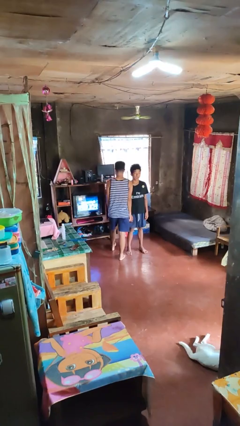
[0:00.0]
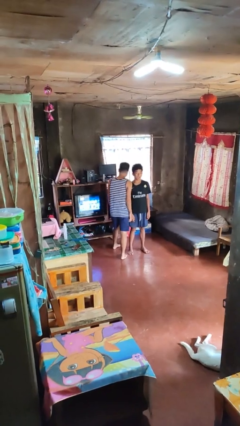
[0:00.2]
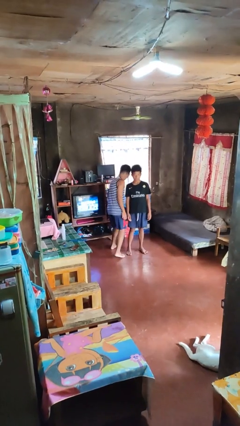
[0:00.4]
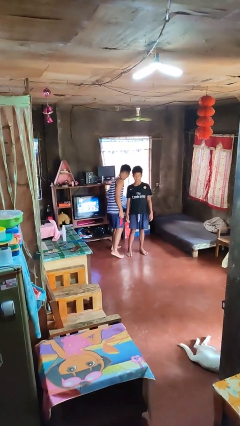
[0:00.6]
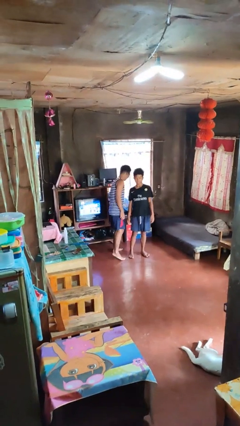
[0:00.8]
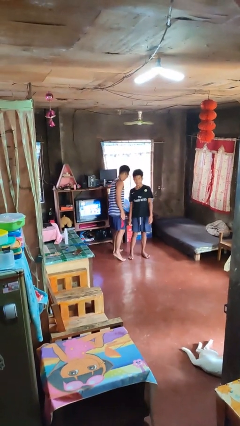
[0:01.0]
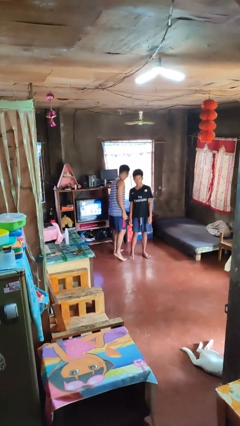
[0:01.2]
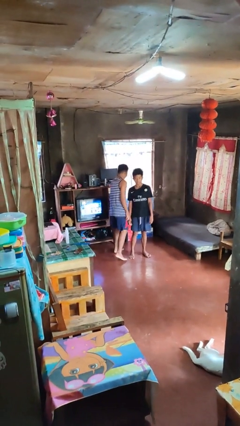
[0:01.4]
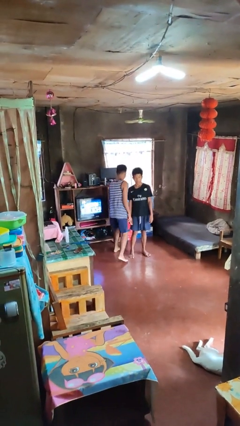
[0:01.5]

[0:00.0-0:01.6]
person bumps into person

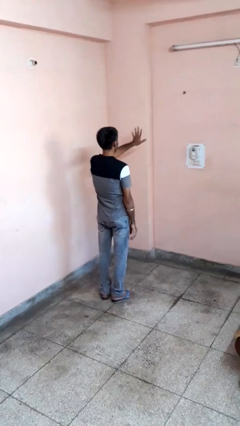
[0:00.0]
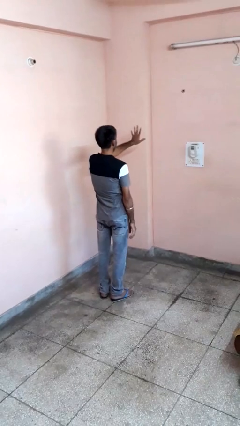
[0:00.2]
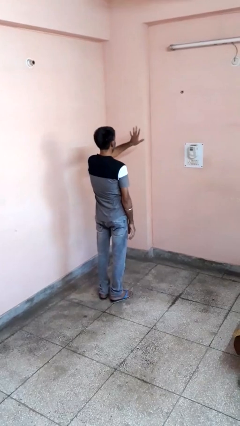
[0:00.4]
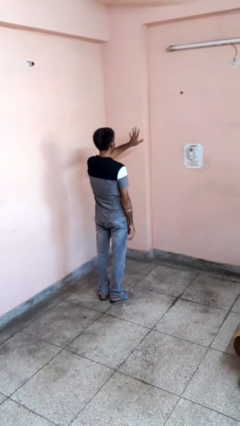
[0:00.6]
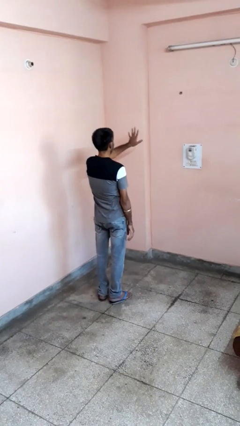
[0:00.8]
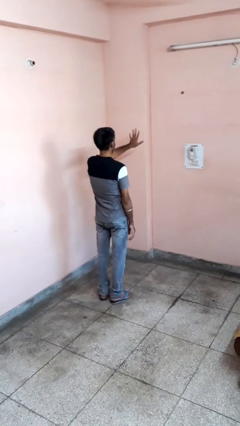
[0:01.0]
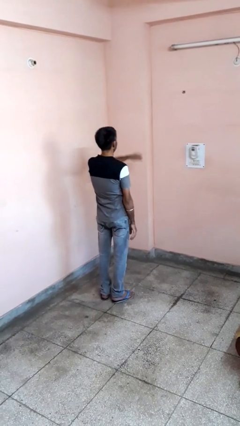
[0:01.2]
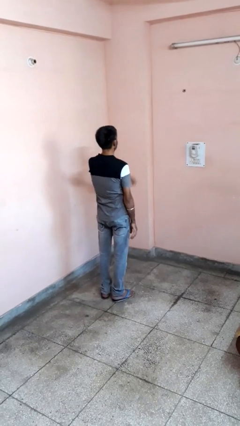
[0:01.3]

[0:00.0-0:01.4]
person gestures number five

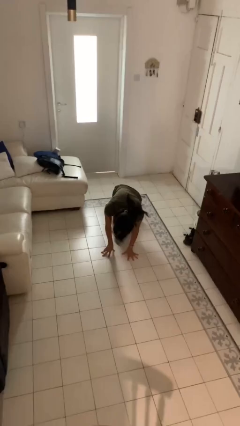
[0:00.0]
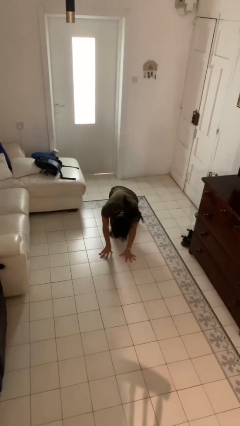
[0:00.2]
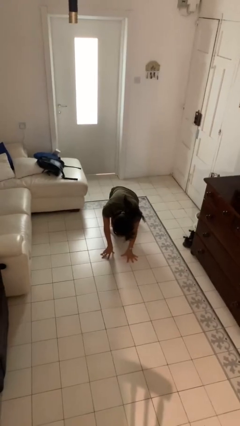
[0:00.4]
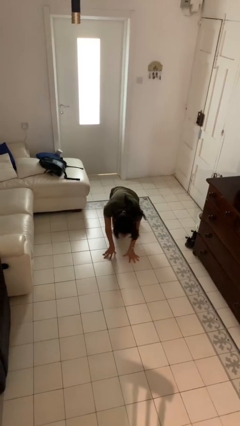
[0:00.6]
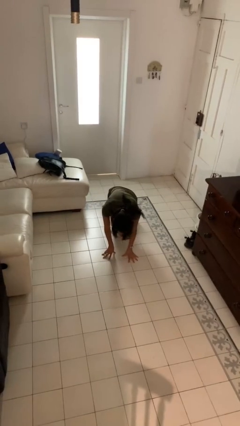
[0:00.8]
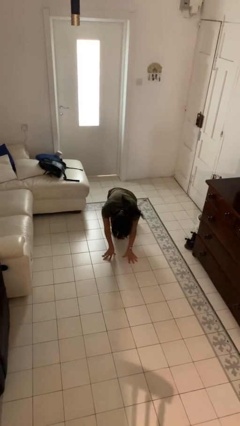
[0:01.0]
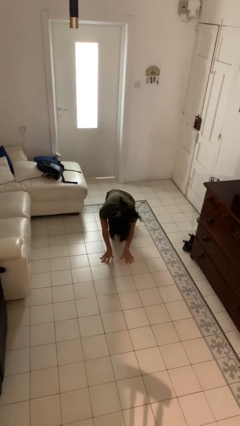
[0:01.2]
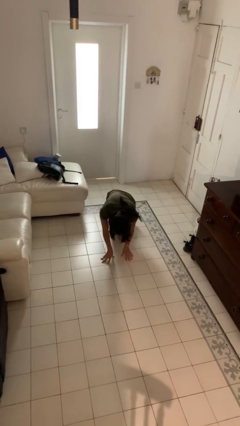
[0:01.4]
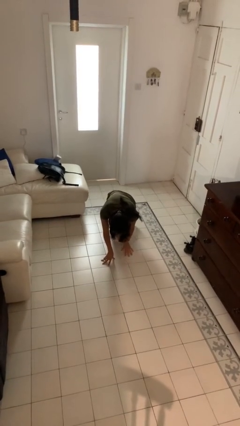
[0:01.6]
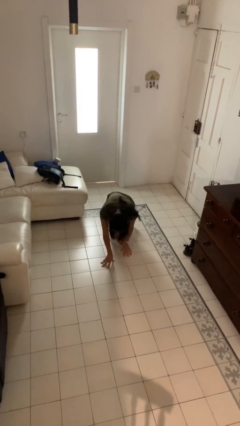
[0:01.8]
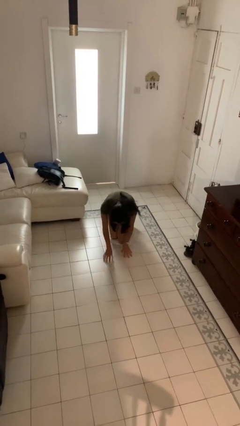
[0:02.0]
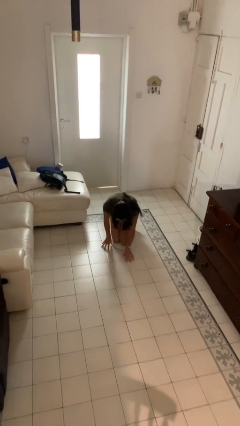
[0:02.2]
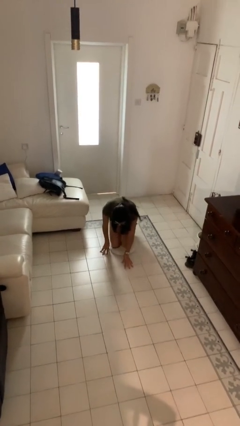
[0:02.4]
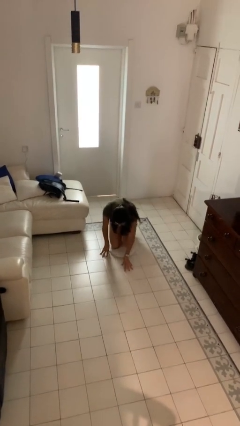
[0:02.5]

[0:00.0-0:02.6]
person lies down on floor

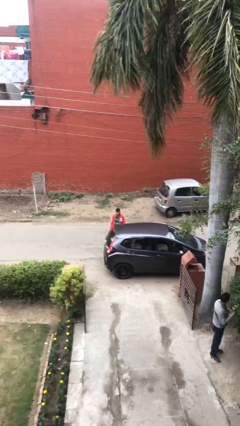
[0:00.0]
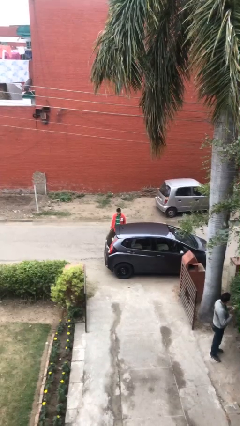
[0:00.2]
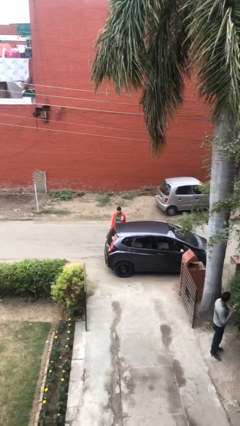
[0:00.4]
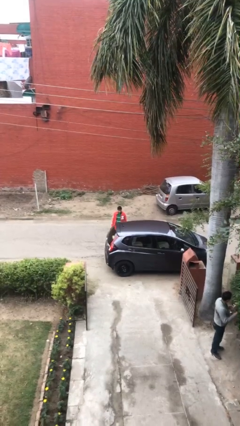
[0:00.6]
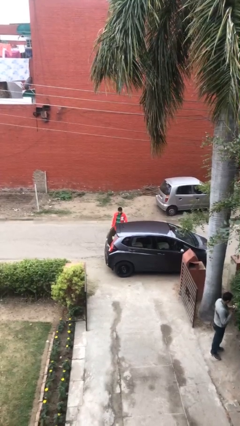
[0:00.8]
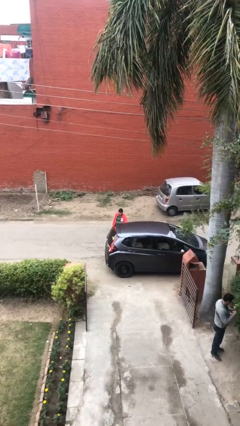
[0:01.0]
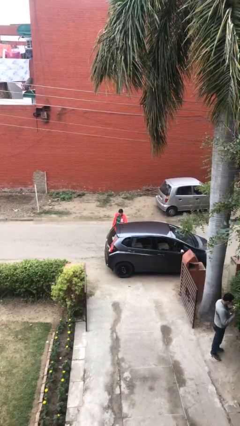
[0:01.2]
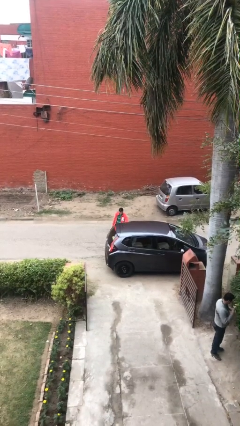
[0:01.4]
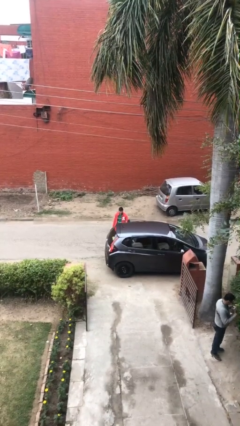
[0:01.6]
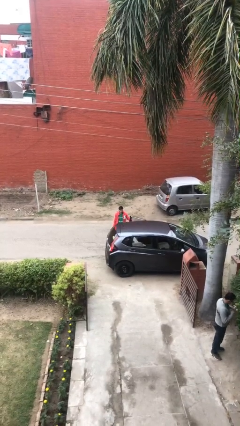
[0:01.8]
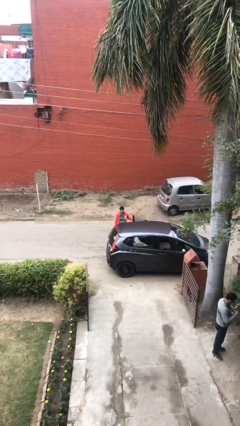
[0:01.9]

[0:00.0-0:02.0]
person opens car door

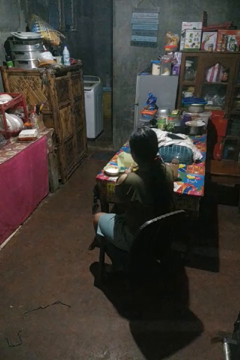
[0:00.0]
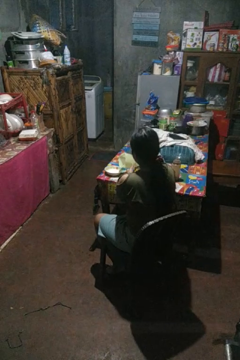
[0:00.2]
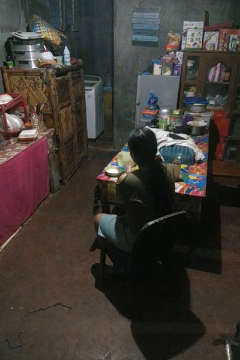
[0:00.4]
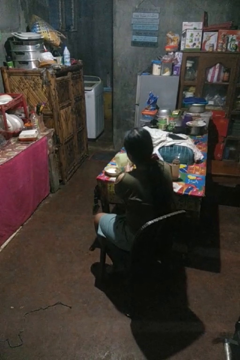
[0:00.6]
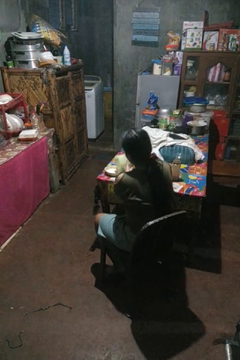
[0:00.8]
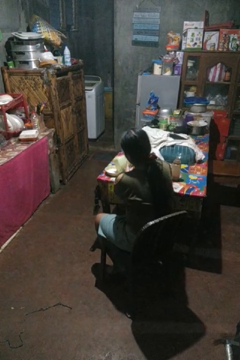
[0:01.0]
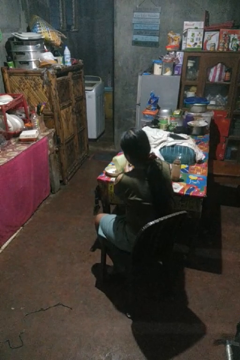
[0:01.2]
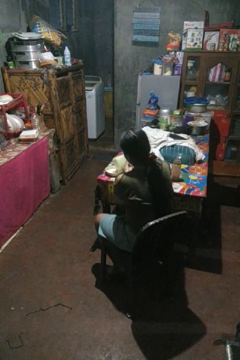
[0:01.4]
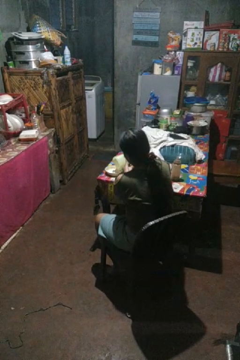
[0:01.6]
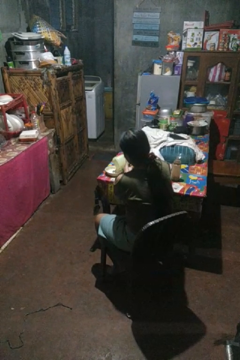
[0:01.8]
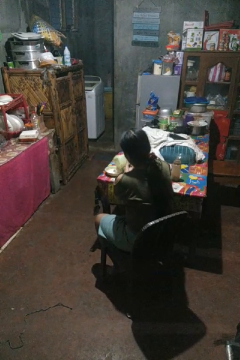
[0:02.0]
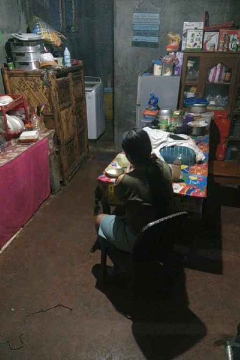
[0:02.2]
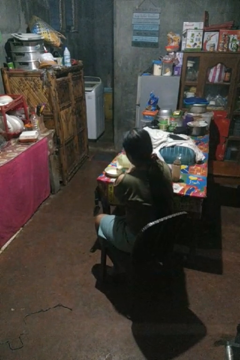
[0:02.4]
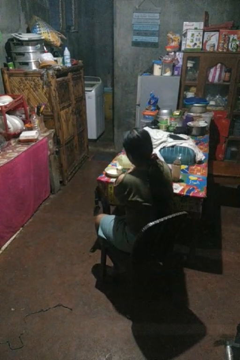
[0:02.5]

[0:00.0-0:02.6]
person pours into bowl

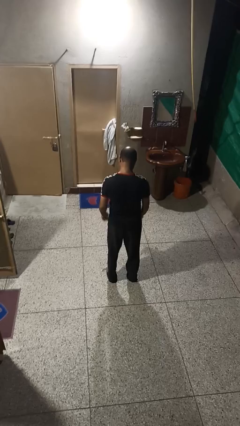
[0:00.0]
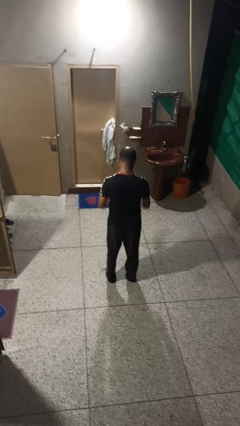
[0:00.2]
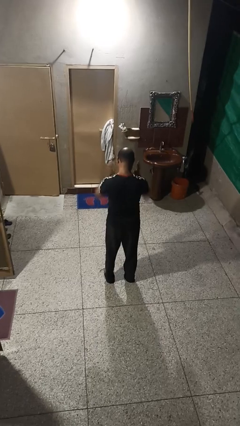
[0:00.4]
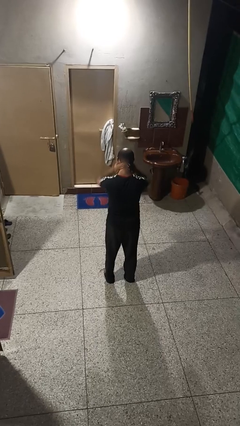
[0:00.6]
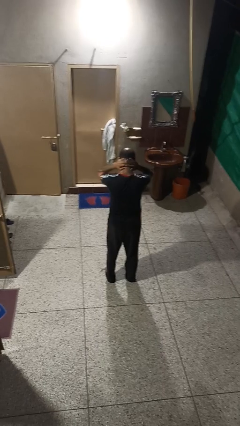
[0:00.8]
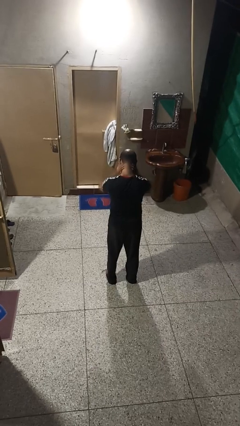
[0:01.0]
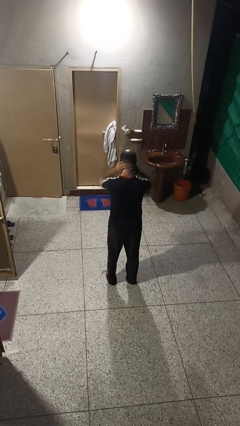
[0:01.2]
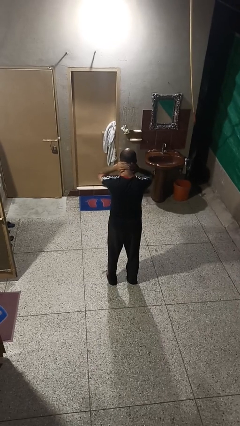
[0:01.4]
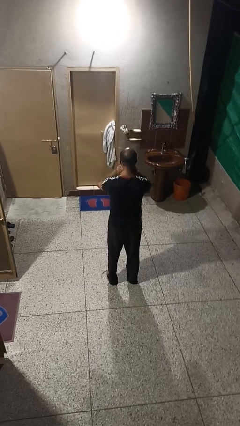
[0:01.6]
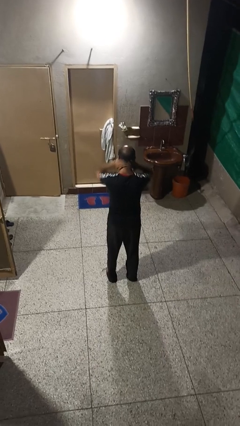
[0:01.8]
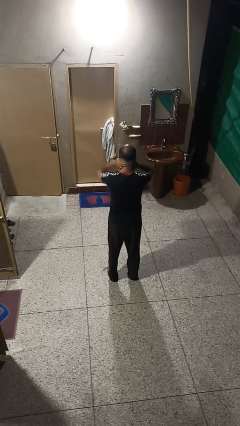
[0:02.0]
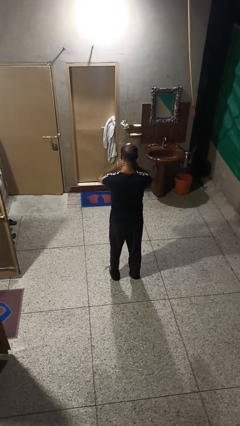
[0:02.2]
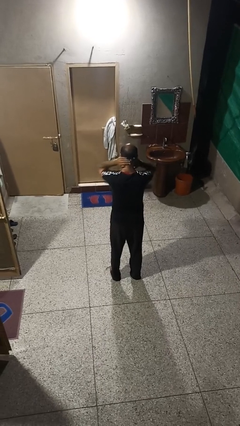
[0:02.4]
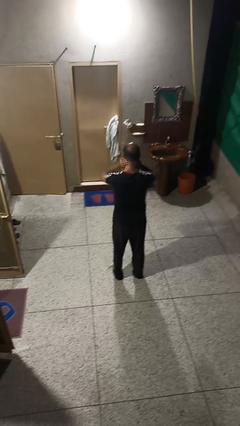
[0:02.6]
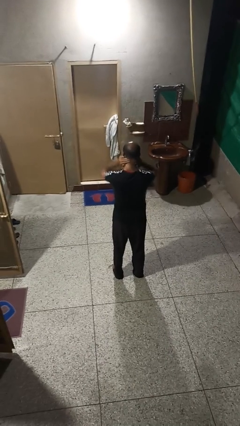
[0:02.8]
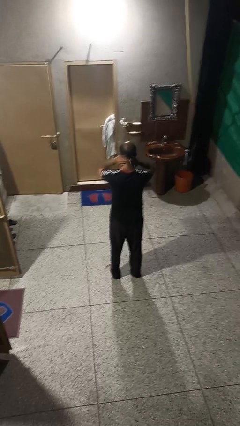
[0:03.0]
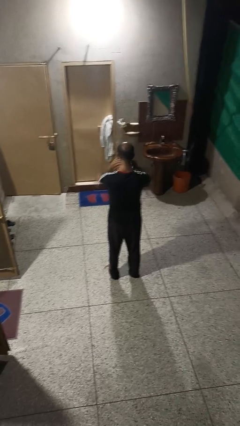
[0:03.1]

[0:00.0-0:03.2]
person rubs neck

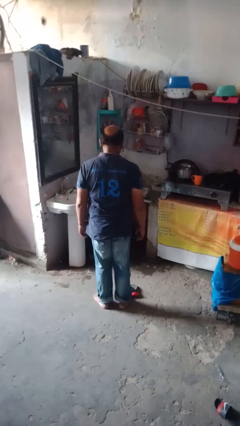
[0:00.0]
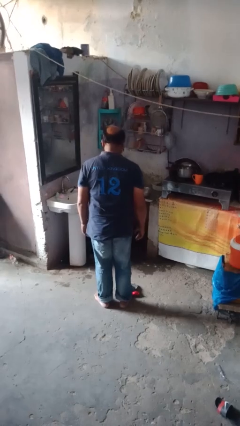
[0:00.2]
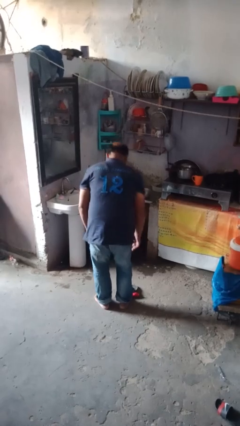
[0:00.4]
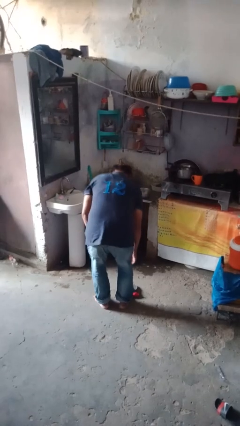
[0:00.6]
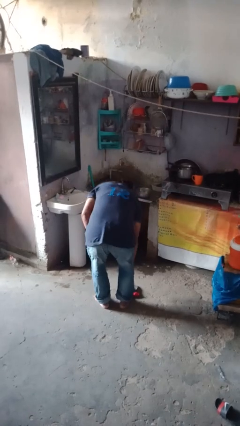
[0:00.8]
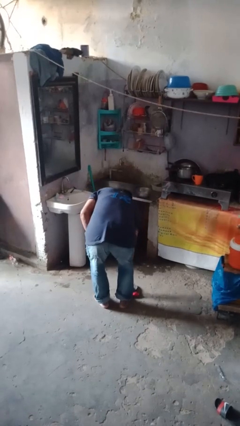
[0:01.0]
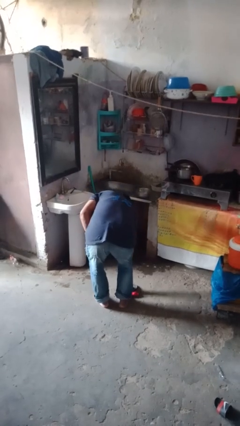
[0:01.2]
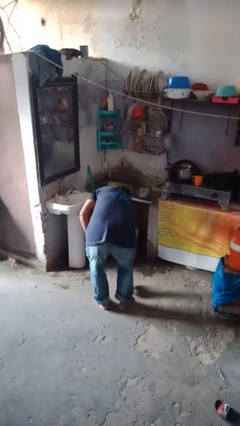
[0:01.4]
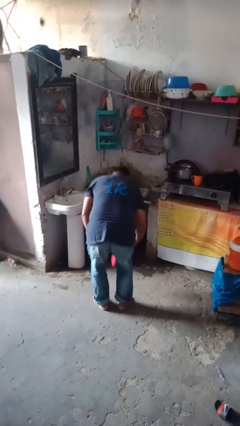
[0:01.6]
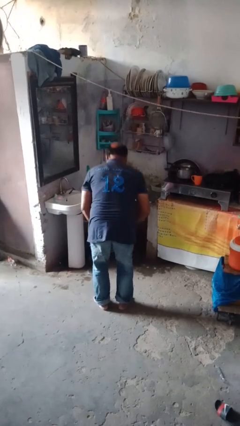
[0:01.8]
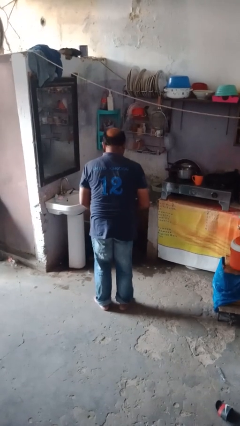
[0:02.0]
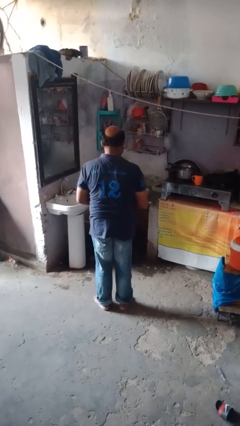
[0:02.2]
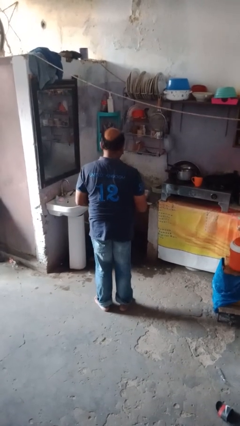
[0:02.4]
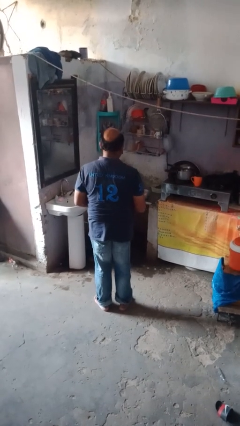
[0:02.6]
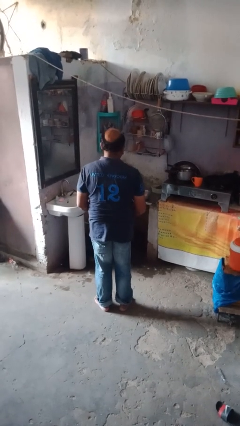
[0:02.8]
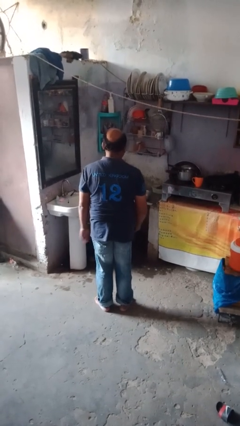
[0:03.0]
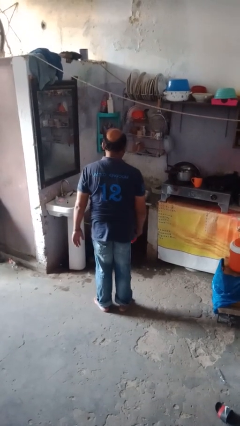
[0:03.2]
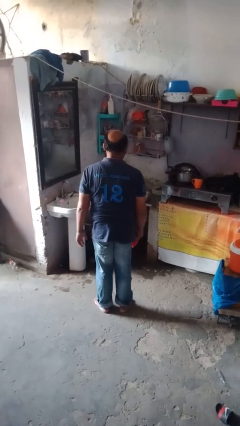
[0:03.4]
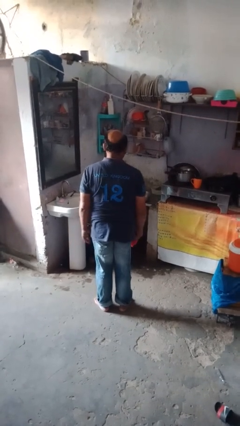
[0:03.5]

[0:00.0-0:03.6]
person picks up object from floor

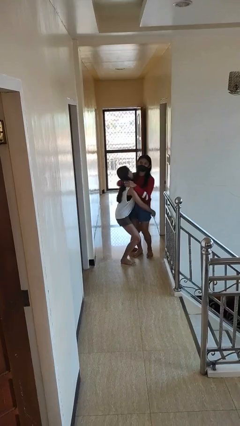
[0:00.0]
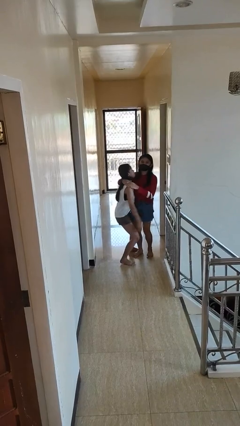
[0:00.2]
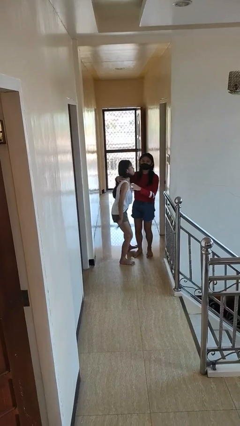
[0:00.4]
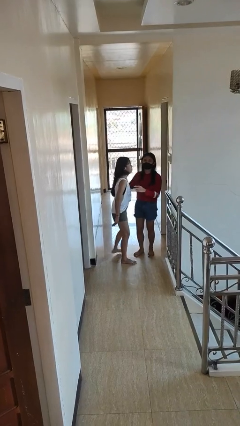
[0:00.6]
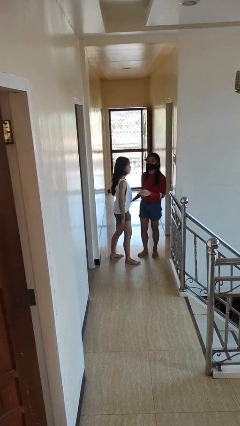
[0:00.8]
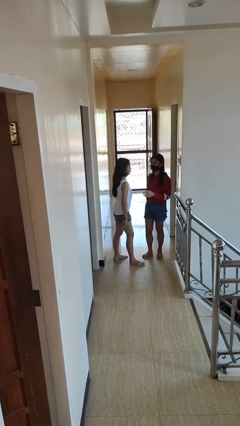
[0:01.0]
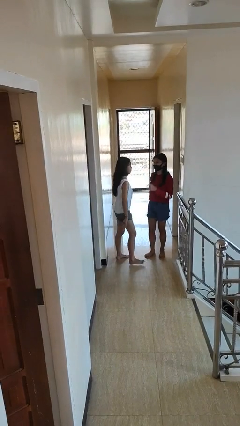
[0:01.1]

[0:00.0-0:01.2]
person puts down person
